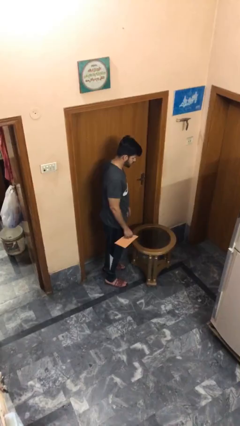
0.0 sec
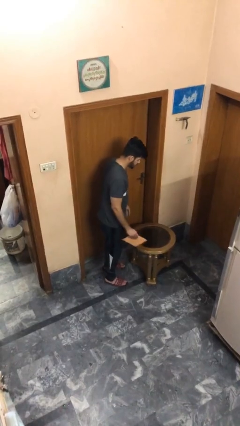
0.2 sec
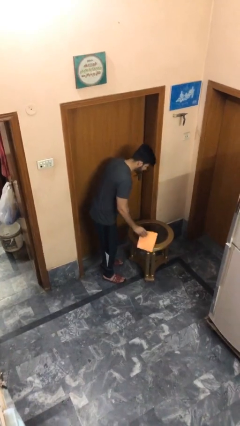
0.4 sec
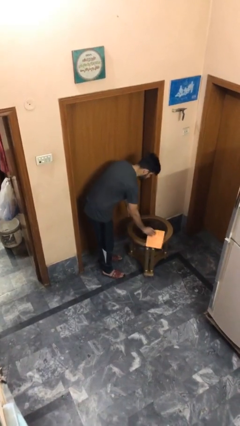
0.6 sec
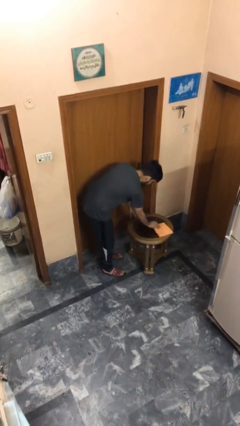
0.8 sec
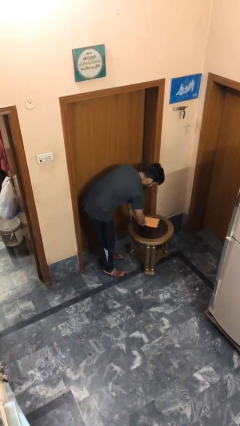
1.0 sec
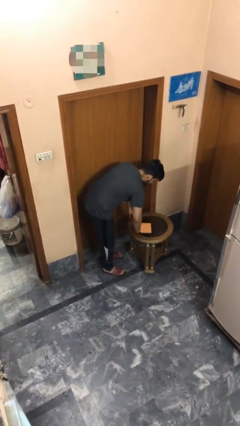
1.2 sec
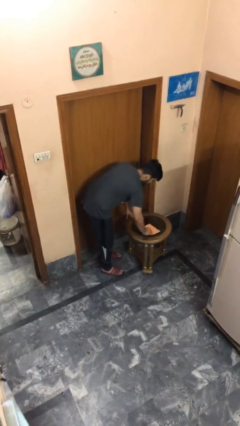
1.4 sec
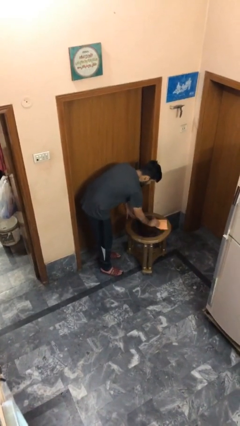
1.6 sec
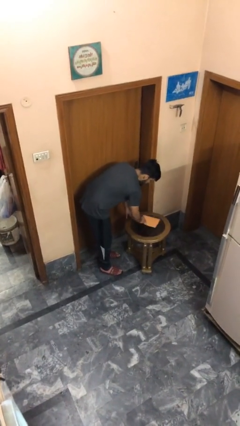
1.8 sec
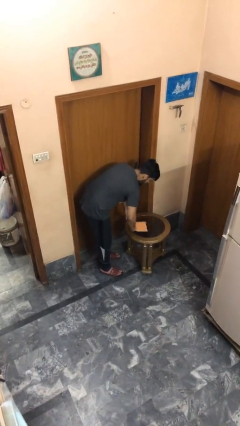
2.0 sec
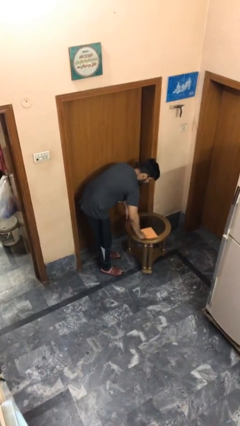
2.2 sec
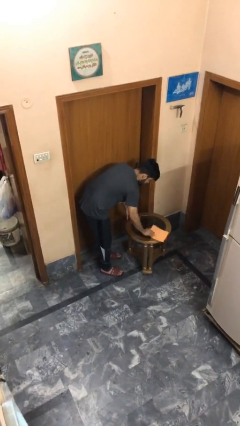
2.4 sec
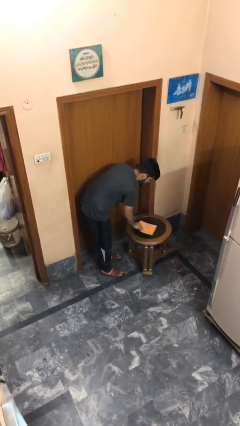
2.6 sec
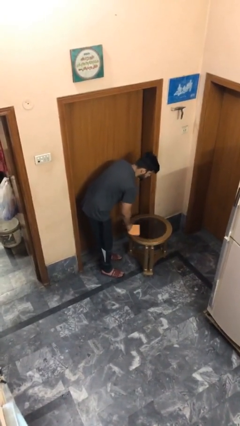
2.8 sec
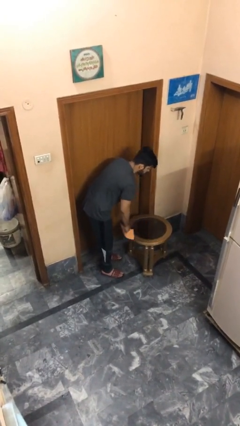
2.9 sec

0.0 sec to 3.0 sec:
person cleans table with rag

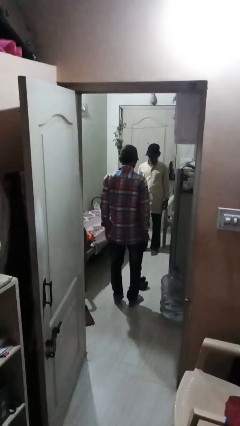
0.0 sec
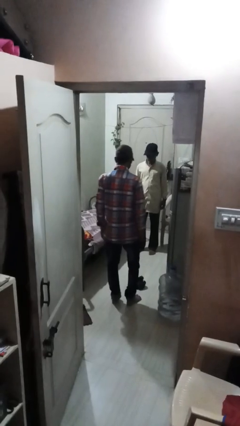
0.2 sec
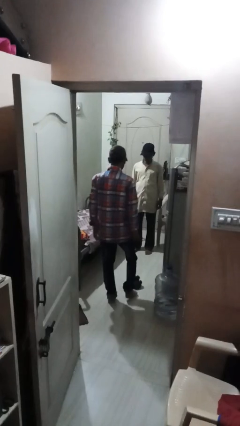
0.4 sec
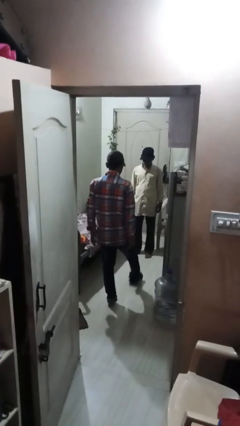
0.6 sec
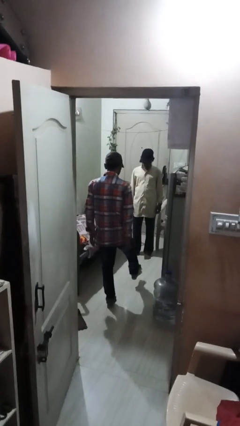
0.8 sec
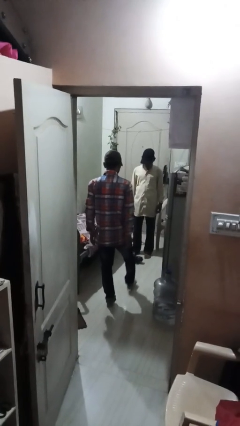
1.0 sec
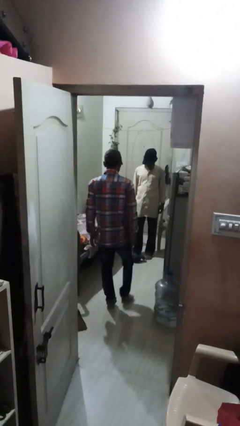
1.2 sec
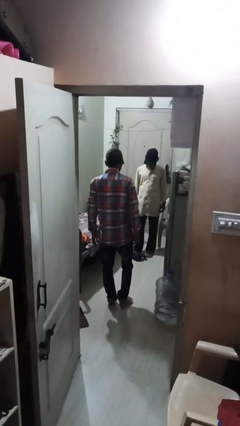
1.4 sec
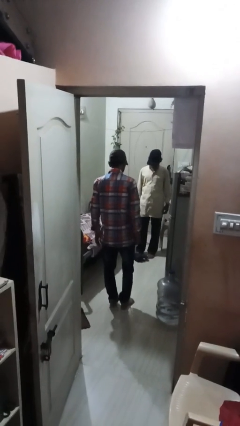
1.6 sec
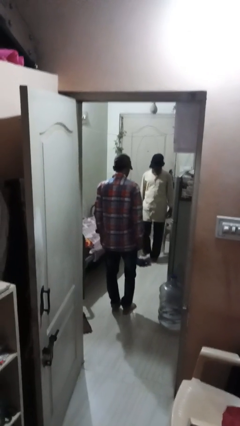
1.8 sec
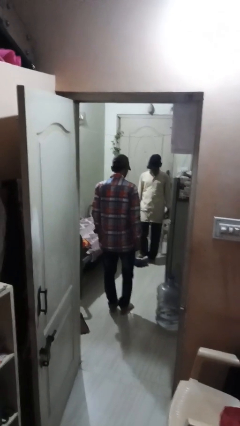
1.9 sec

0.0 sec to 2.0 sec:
person kicks object to person

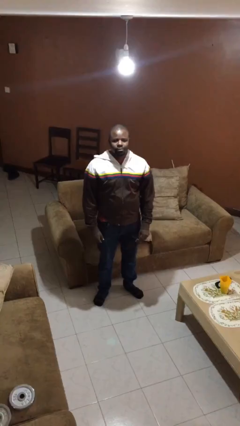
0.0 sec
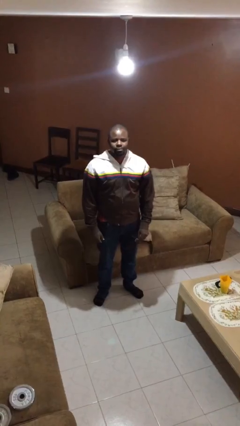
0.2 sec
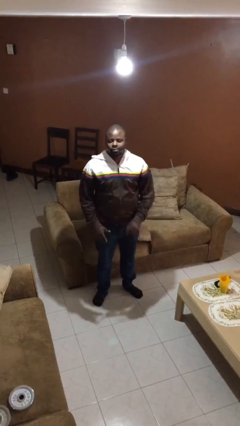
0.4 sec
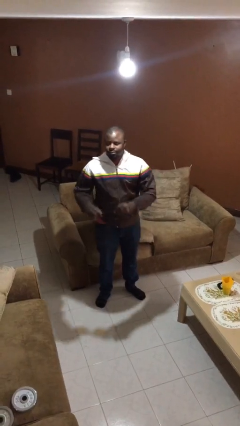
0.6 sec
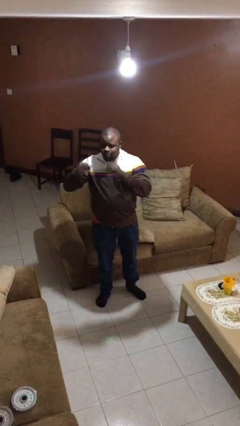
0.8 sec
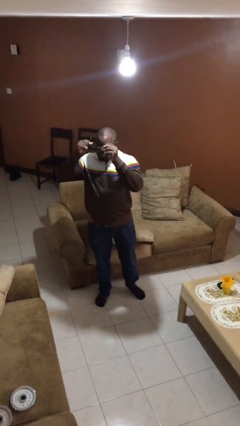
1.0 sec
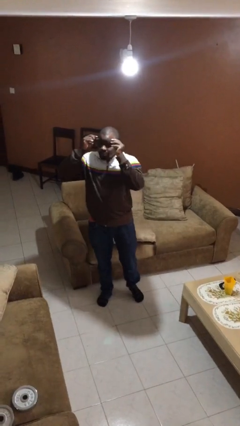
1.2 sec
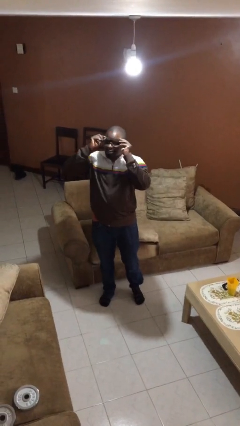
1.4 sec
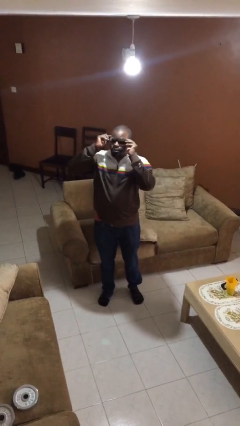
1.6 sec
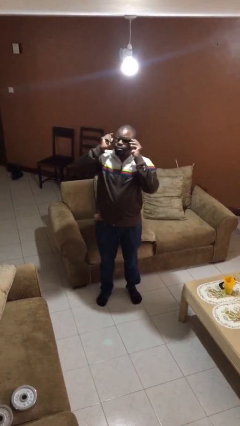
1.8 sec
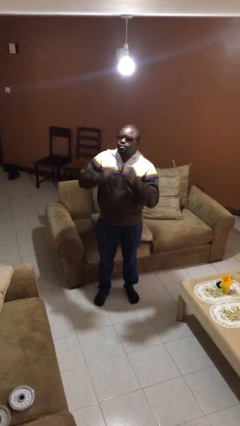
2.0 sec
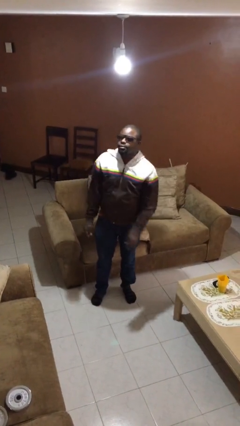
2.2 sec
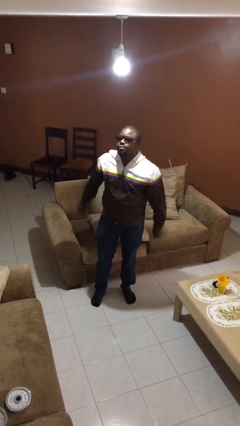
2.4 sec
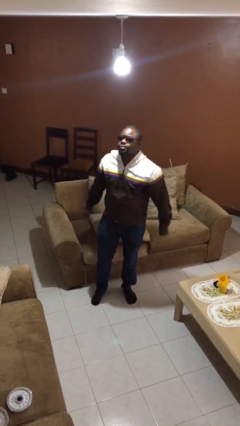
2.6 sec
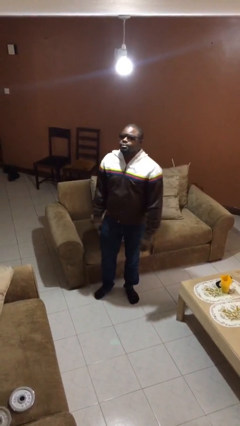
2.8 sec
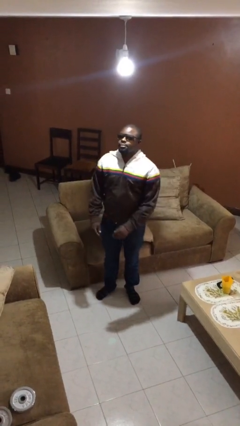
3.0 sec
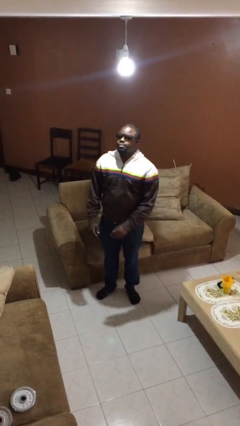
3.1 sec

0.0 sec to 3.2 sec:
person puts on sunglasses

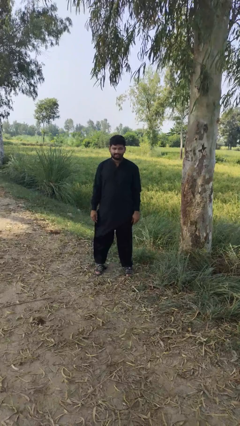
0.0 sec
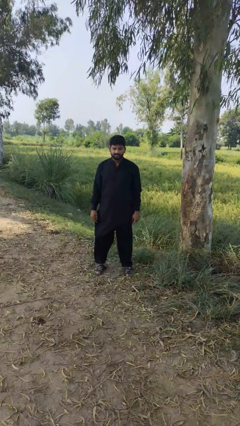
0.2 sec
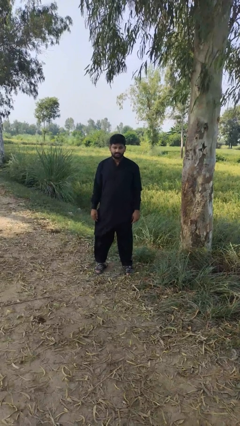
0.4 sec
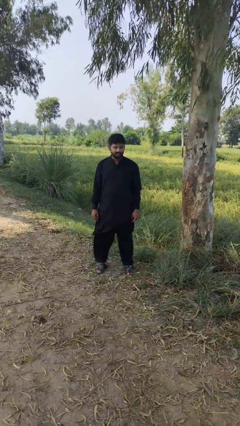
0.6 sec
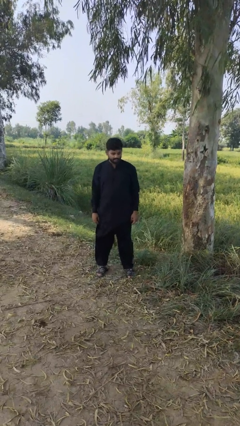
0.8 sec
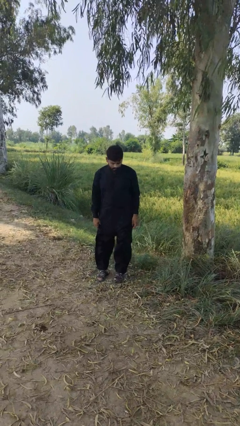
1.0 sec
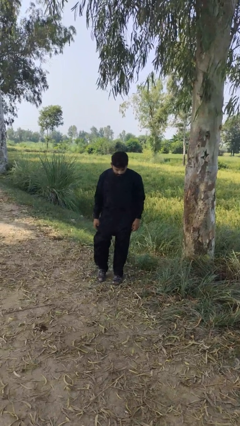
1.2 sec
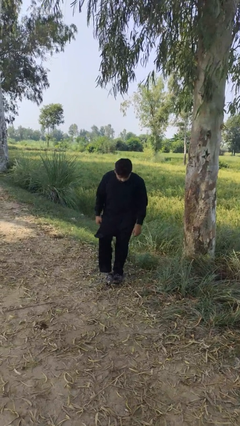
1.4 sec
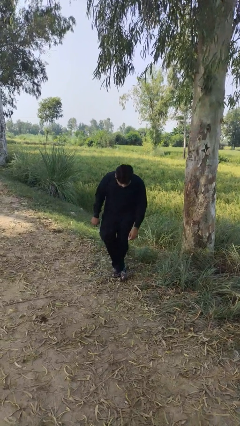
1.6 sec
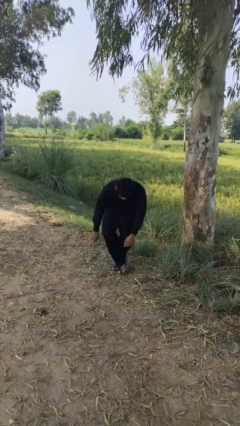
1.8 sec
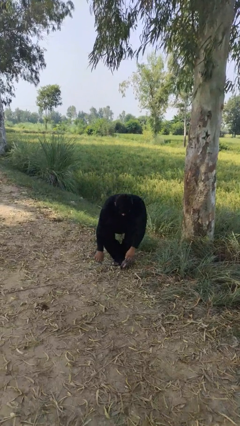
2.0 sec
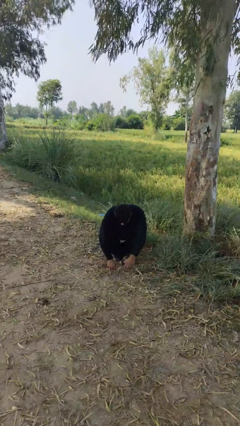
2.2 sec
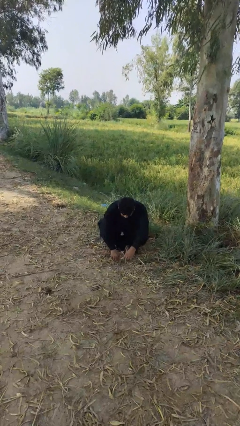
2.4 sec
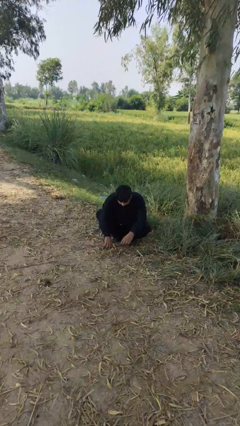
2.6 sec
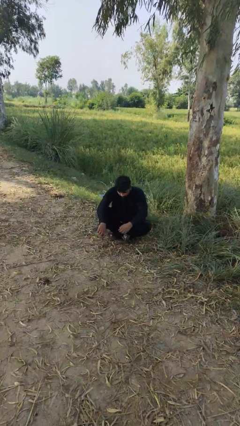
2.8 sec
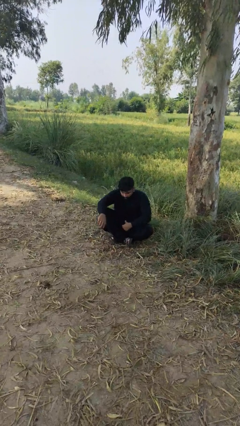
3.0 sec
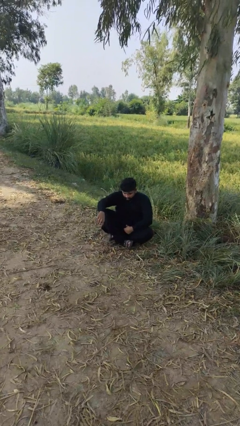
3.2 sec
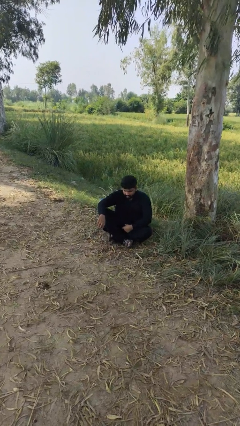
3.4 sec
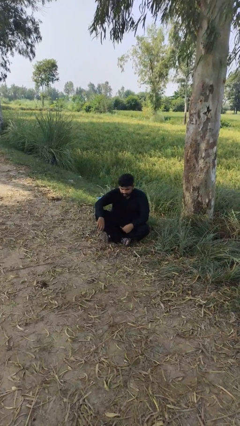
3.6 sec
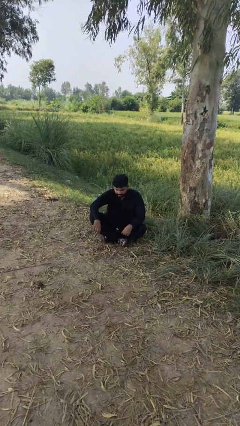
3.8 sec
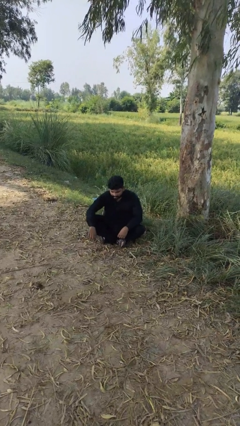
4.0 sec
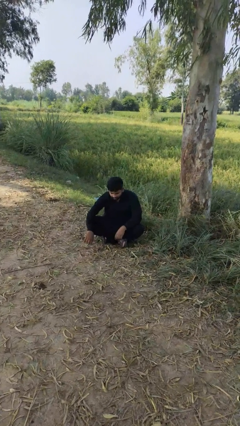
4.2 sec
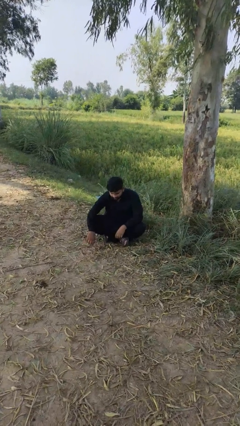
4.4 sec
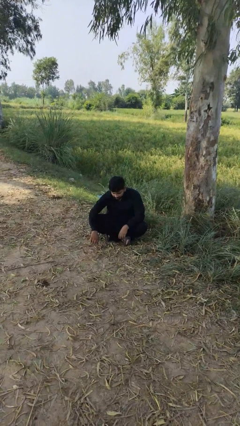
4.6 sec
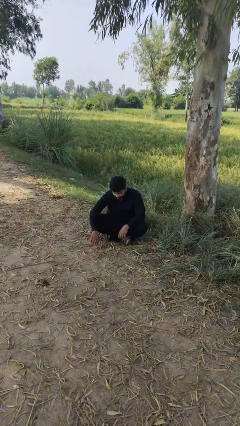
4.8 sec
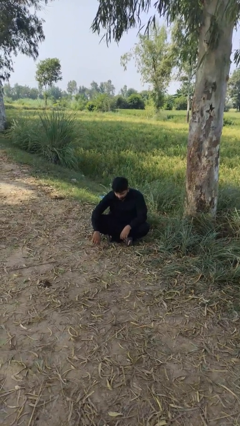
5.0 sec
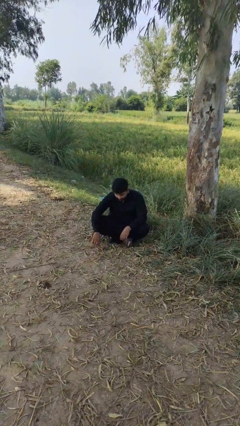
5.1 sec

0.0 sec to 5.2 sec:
person sits crisscross

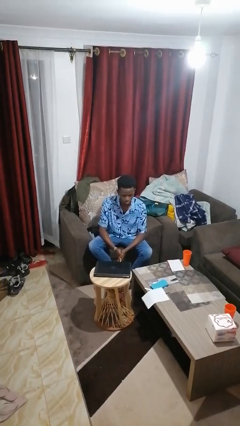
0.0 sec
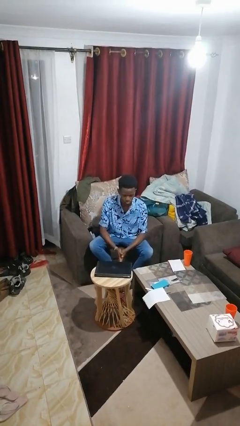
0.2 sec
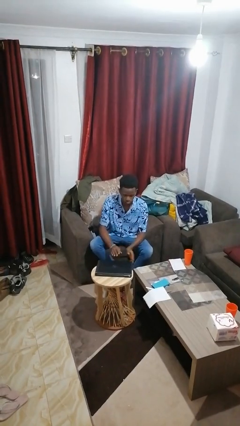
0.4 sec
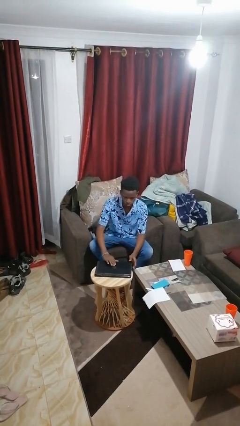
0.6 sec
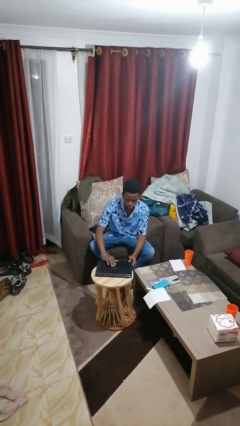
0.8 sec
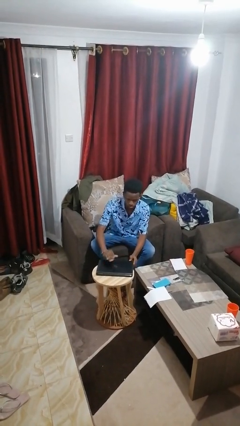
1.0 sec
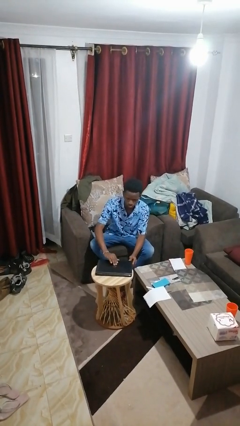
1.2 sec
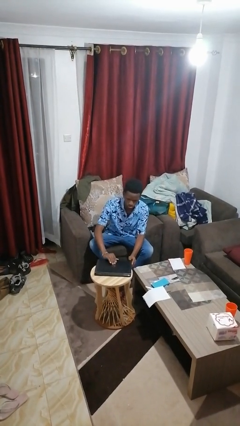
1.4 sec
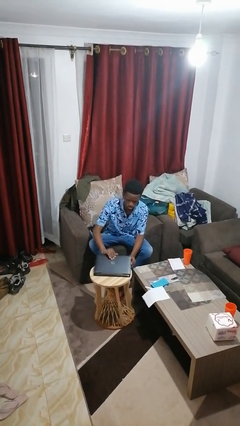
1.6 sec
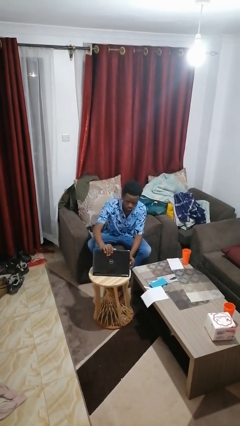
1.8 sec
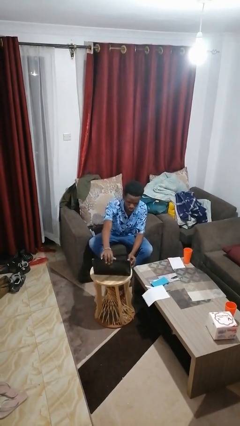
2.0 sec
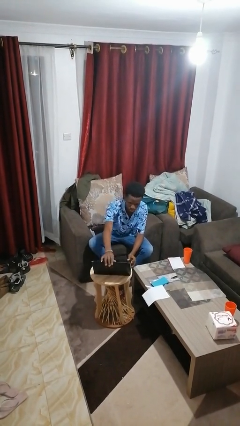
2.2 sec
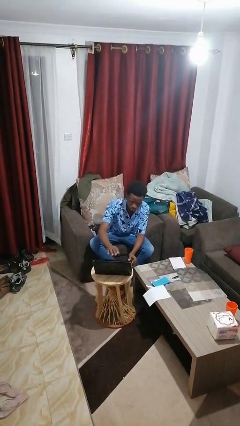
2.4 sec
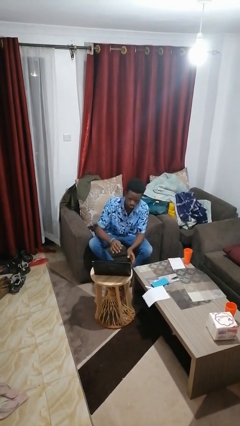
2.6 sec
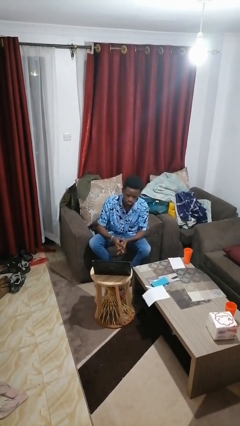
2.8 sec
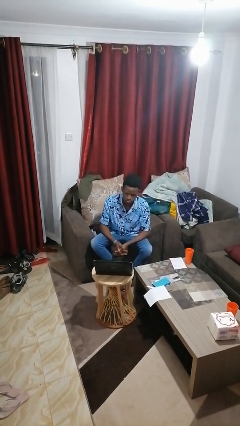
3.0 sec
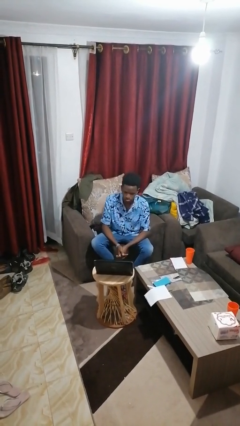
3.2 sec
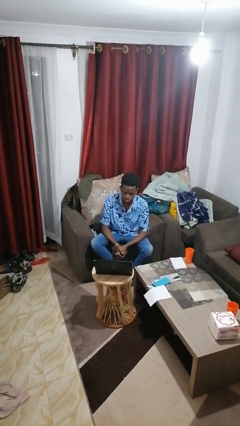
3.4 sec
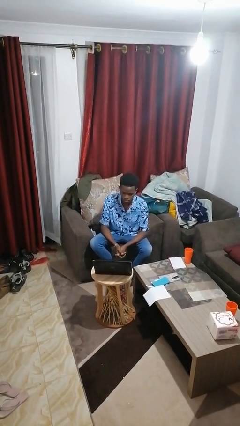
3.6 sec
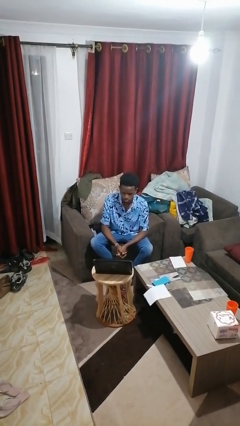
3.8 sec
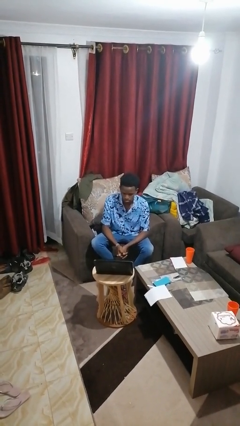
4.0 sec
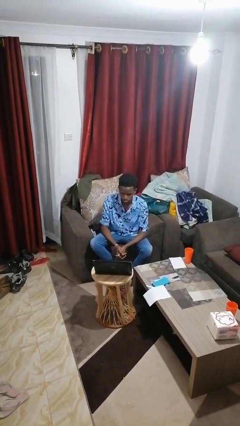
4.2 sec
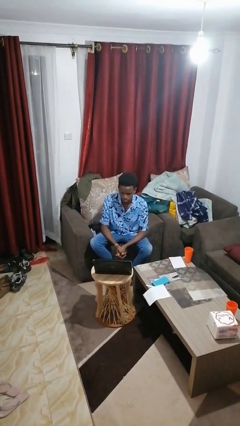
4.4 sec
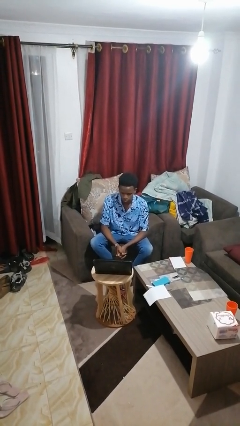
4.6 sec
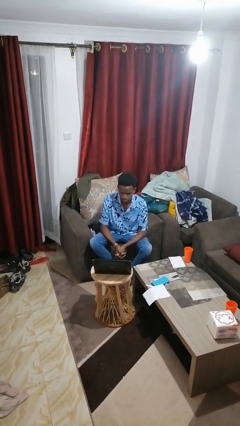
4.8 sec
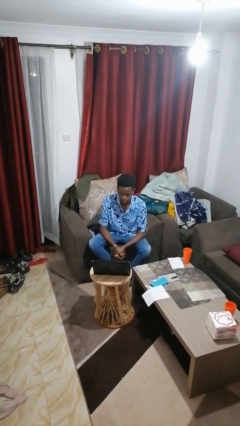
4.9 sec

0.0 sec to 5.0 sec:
person opens laptop
